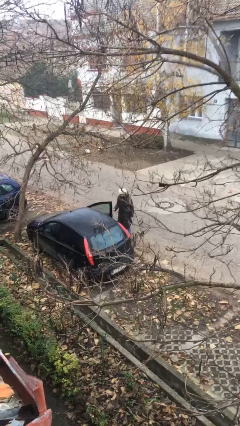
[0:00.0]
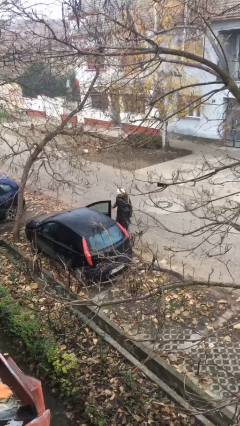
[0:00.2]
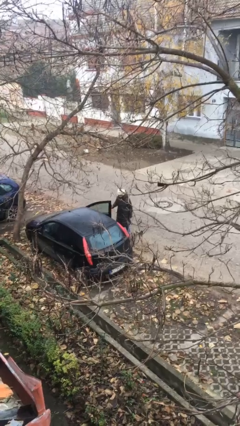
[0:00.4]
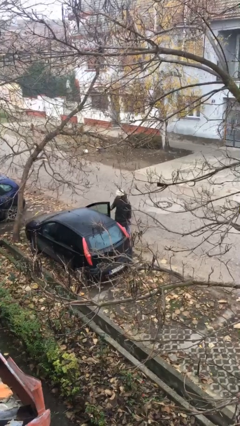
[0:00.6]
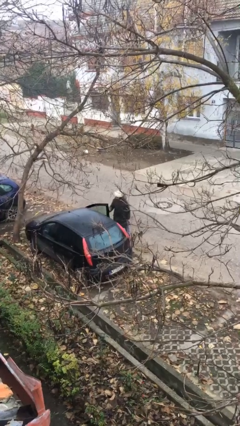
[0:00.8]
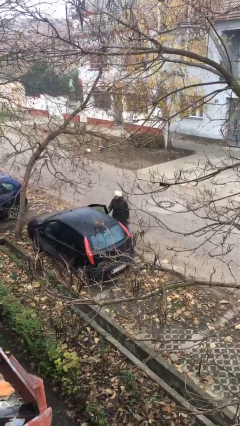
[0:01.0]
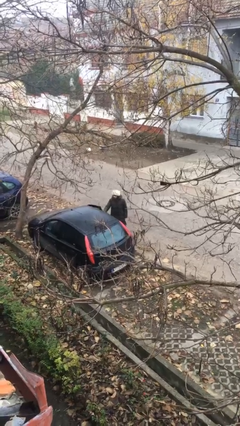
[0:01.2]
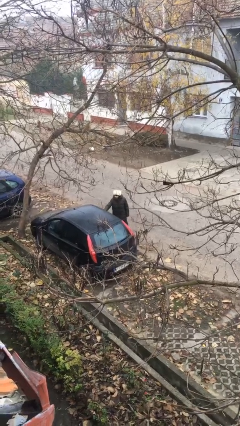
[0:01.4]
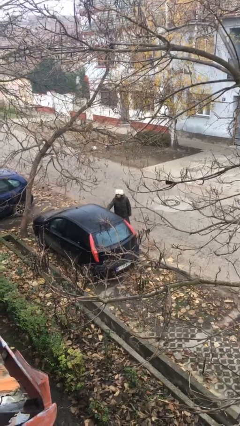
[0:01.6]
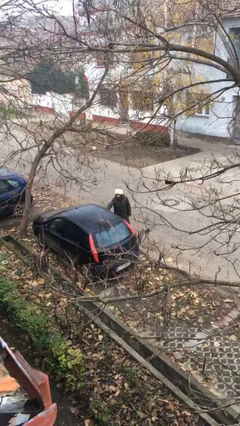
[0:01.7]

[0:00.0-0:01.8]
person closes car door

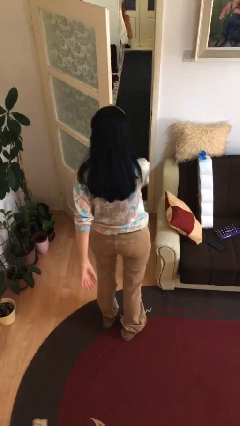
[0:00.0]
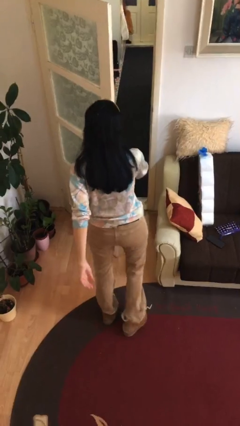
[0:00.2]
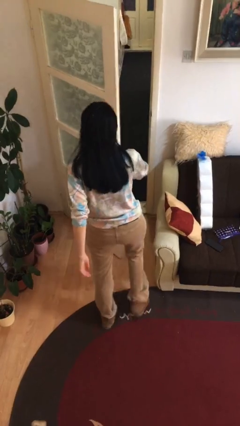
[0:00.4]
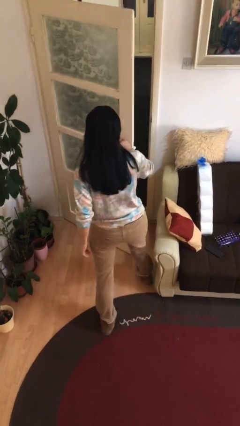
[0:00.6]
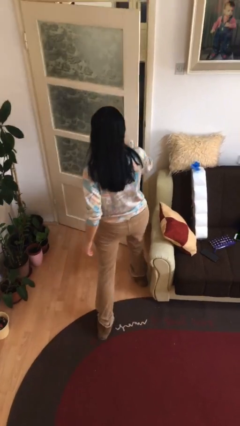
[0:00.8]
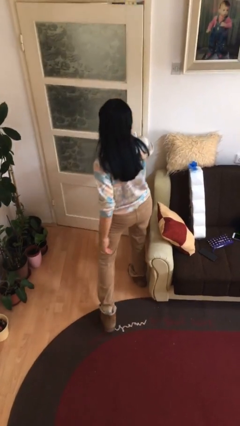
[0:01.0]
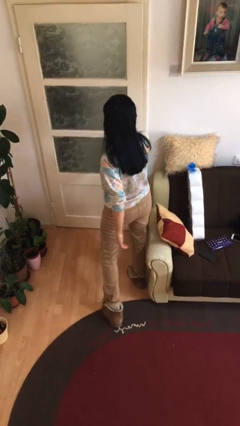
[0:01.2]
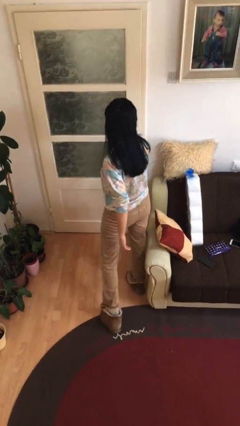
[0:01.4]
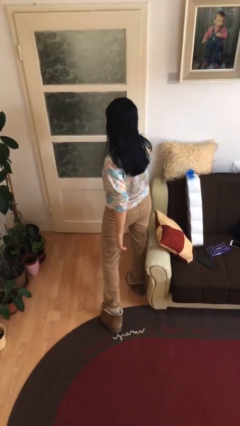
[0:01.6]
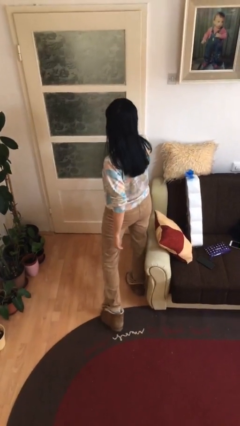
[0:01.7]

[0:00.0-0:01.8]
person closes facility door

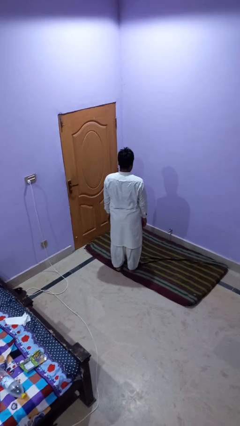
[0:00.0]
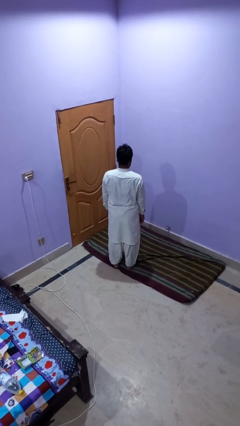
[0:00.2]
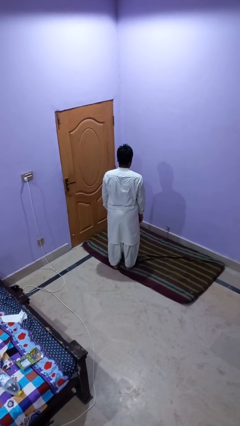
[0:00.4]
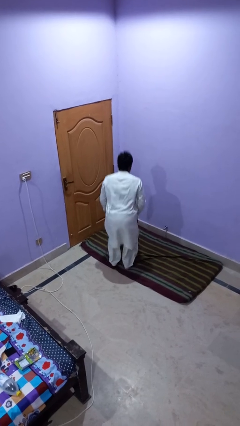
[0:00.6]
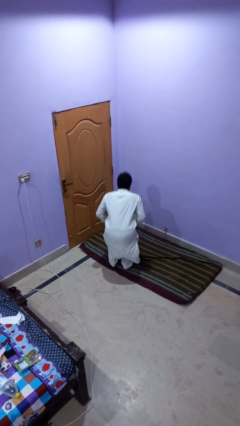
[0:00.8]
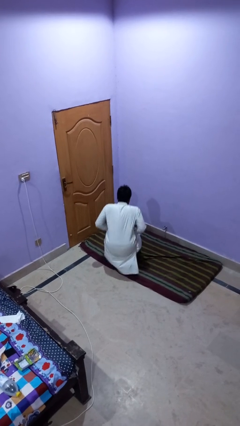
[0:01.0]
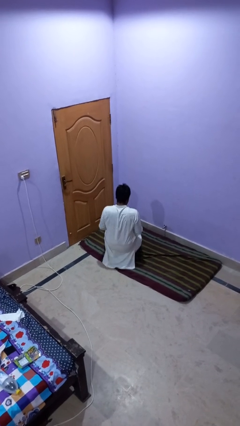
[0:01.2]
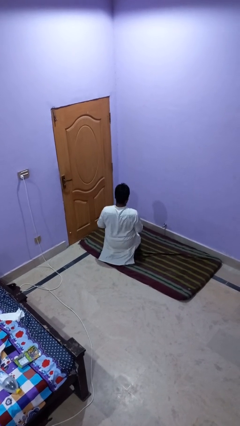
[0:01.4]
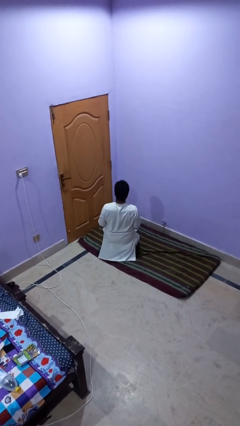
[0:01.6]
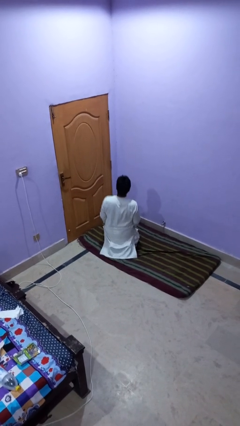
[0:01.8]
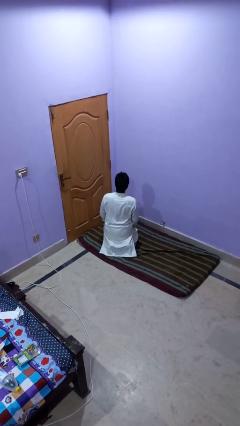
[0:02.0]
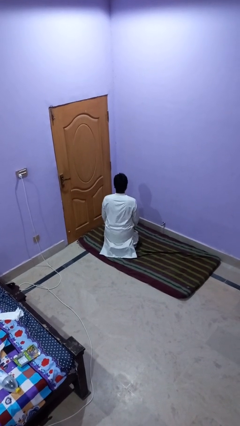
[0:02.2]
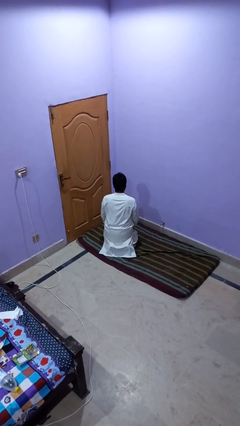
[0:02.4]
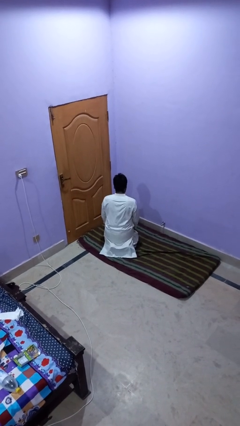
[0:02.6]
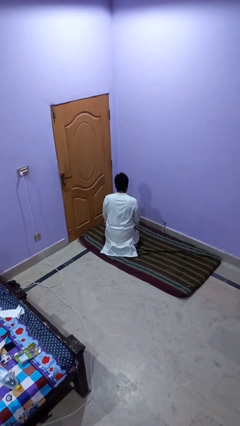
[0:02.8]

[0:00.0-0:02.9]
person kneels

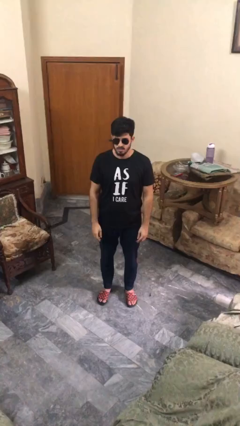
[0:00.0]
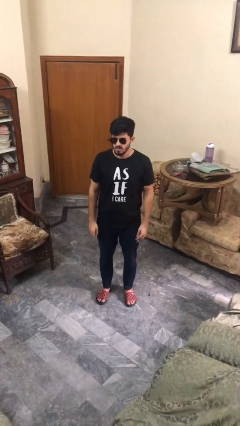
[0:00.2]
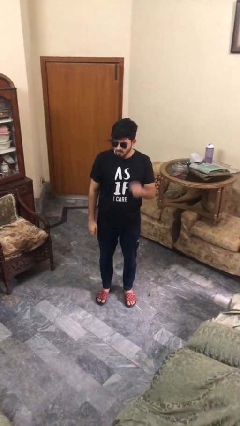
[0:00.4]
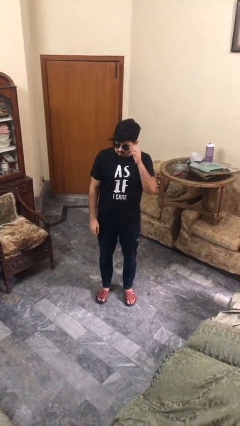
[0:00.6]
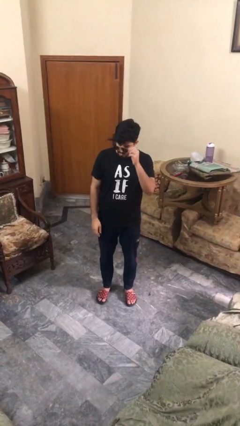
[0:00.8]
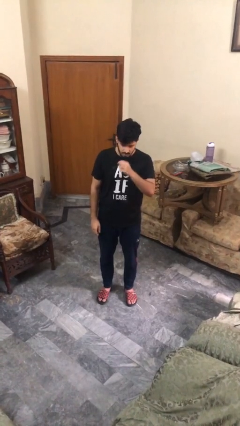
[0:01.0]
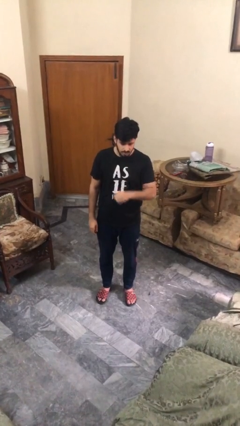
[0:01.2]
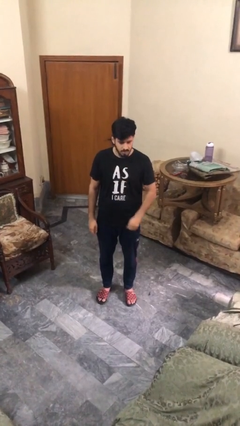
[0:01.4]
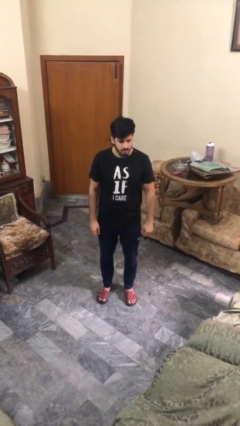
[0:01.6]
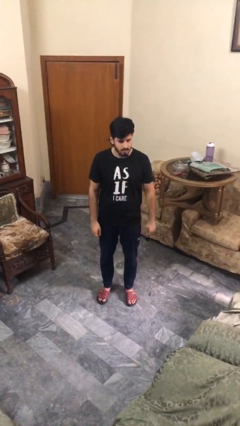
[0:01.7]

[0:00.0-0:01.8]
person takes off sunglasses

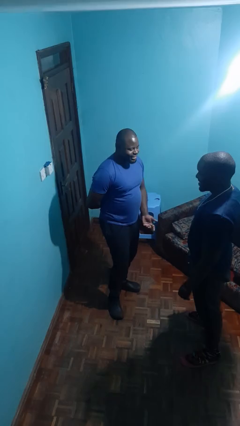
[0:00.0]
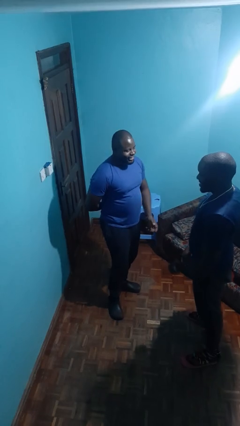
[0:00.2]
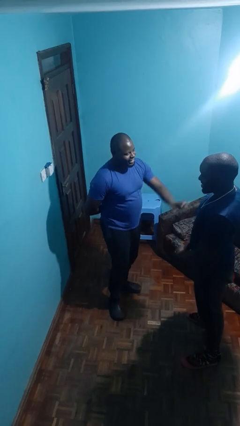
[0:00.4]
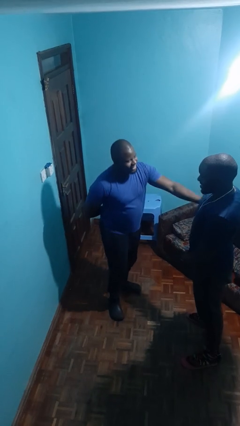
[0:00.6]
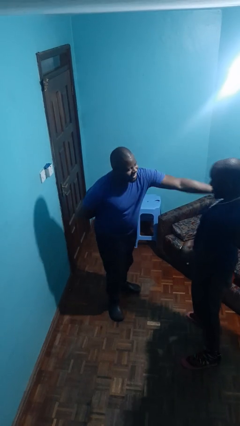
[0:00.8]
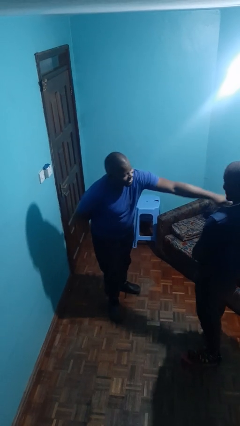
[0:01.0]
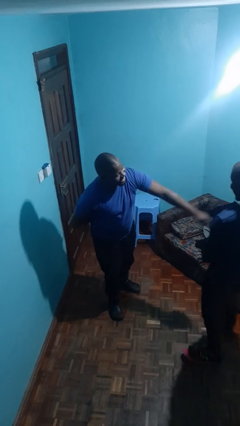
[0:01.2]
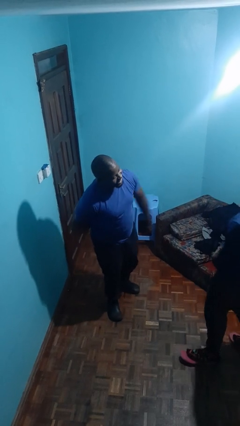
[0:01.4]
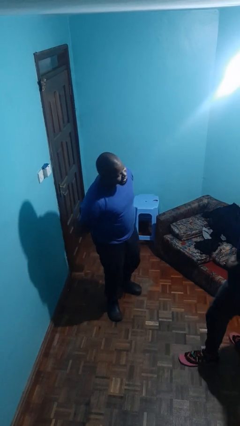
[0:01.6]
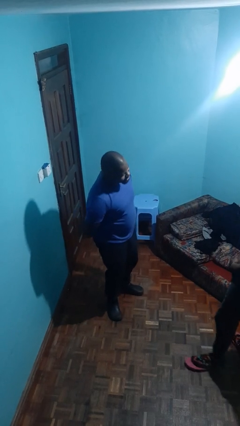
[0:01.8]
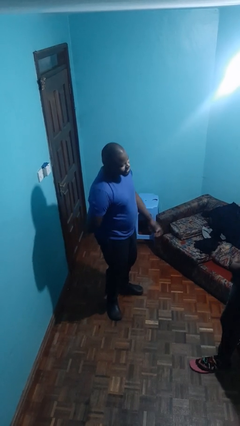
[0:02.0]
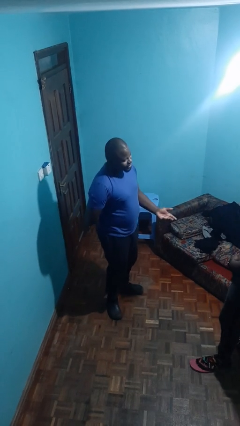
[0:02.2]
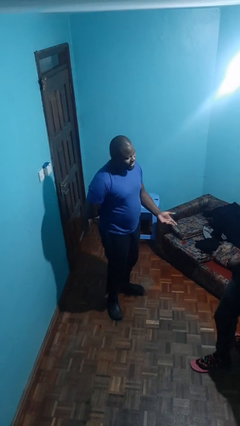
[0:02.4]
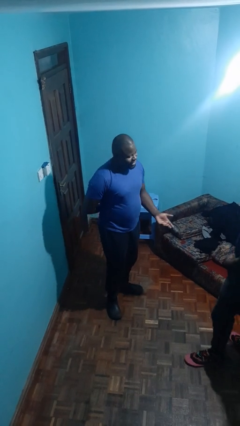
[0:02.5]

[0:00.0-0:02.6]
person shoves person

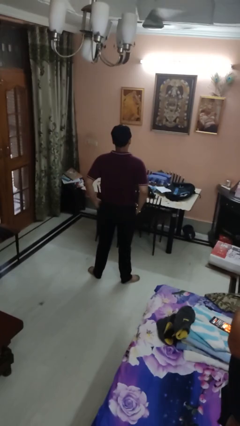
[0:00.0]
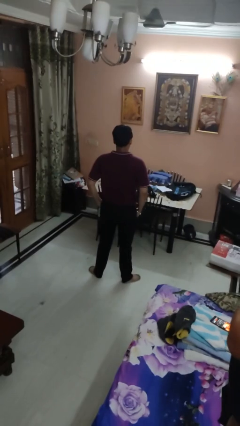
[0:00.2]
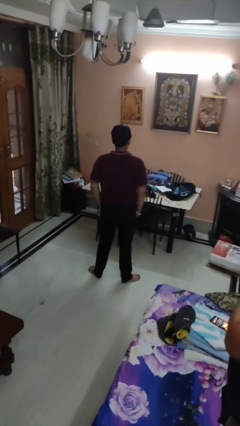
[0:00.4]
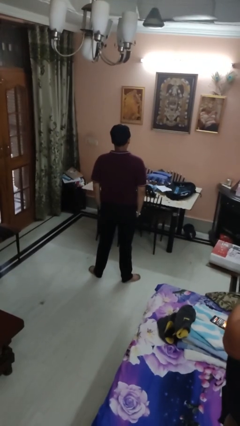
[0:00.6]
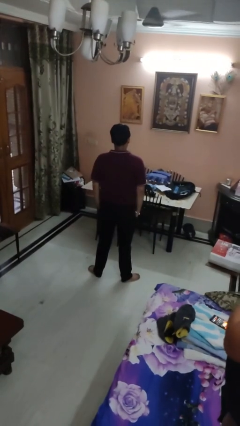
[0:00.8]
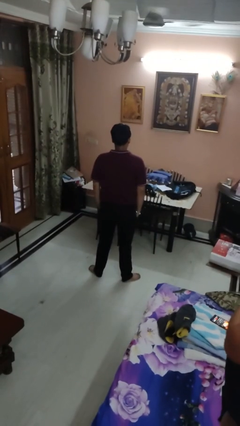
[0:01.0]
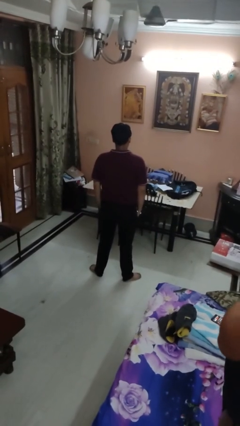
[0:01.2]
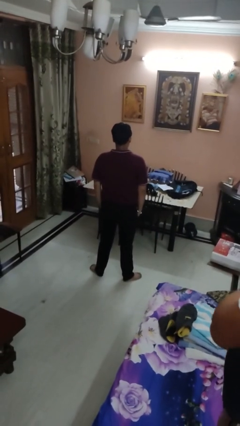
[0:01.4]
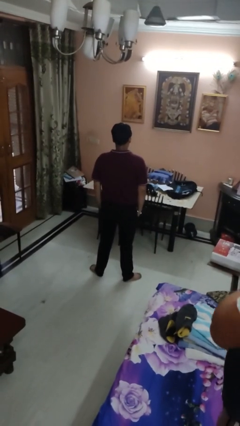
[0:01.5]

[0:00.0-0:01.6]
person puts hands in back pockets

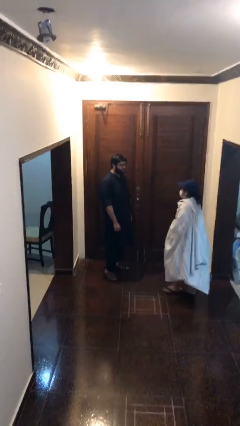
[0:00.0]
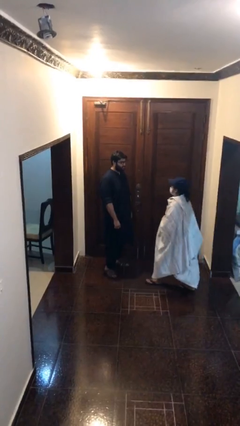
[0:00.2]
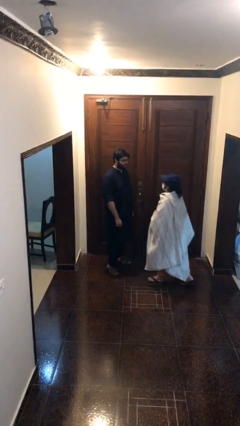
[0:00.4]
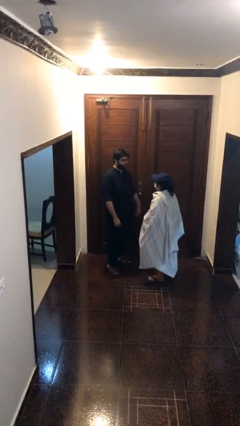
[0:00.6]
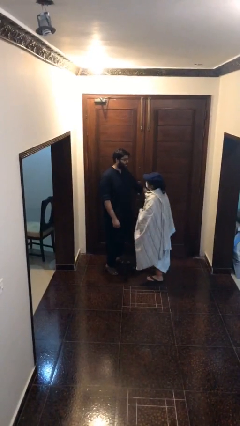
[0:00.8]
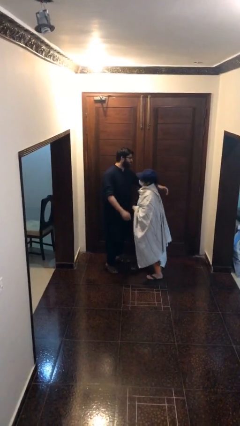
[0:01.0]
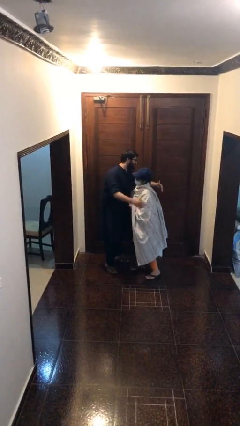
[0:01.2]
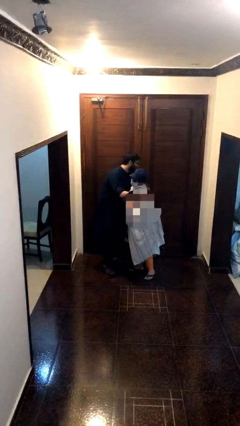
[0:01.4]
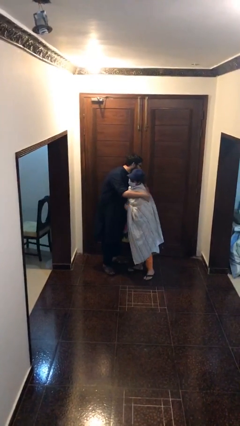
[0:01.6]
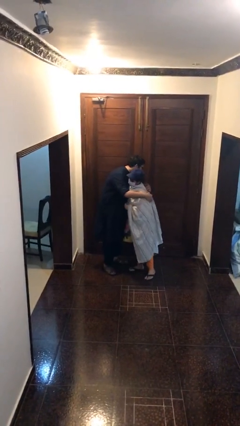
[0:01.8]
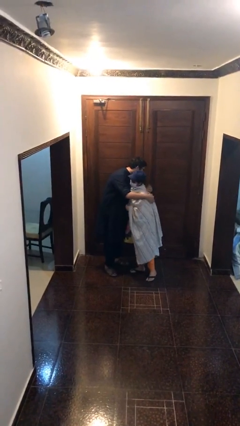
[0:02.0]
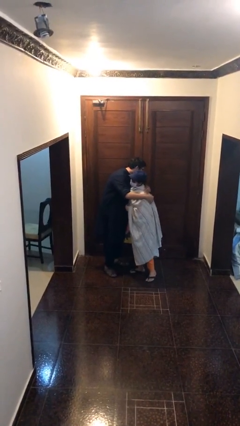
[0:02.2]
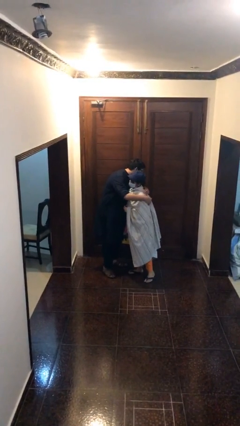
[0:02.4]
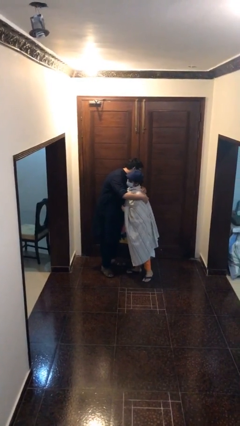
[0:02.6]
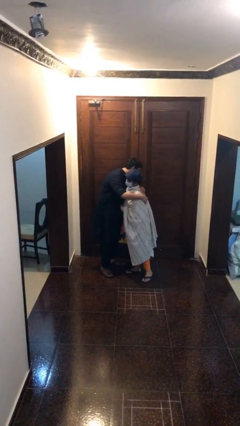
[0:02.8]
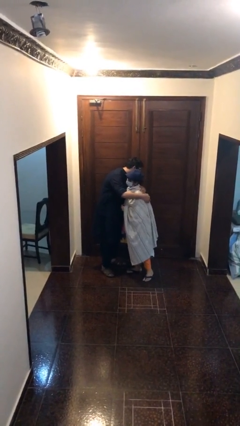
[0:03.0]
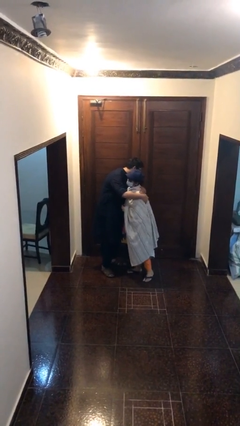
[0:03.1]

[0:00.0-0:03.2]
person embraces person

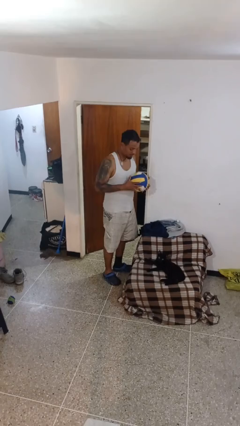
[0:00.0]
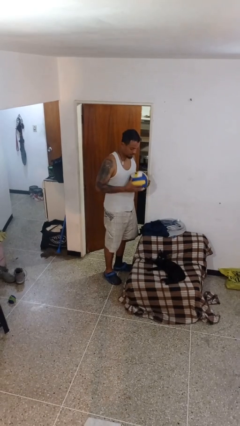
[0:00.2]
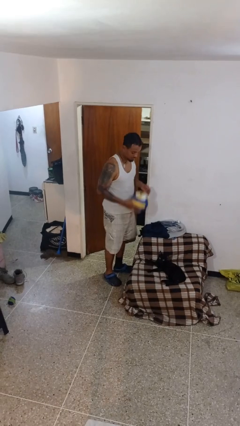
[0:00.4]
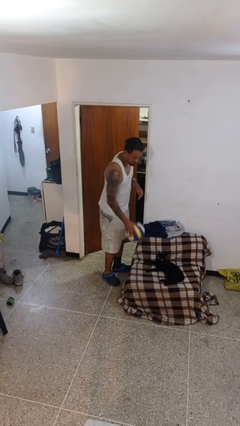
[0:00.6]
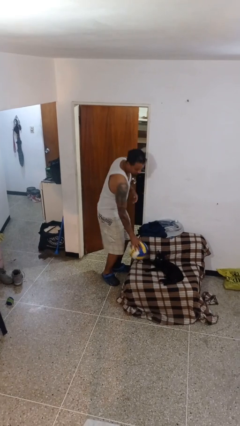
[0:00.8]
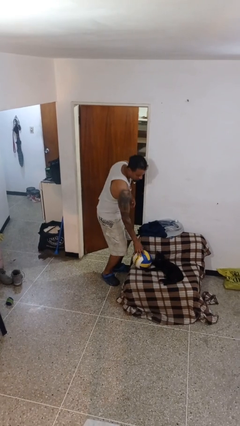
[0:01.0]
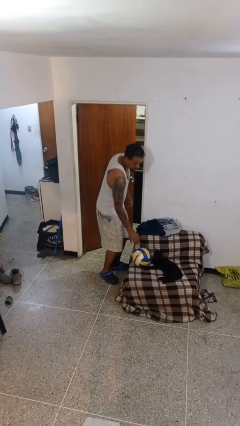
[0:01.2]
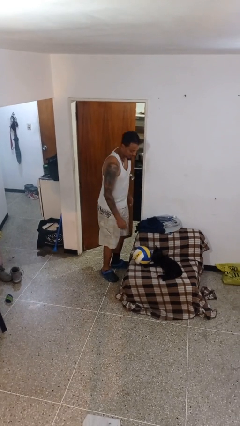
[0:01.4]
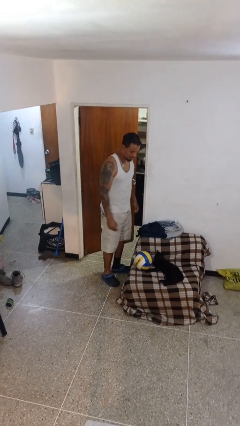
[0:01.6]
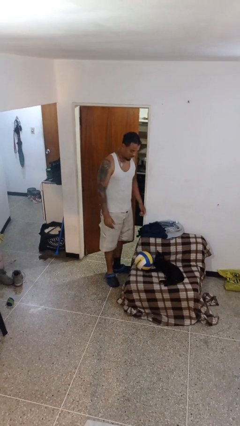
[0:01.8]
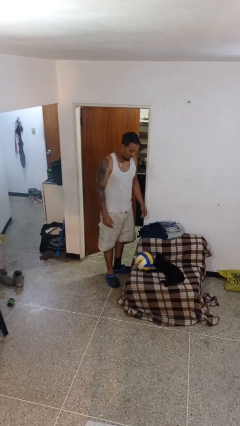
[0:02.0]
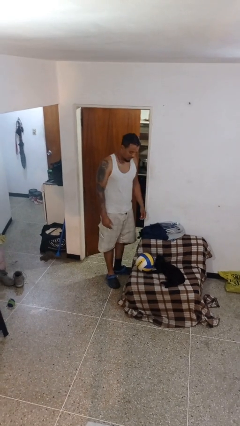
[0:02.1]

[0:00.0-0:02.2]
person puts down object on couch
